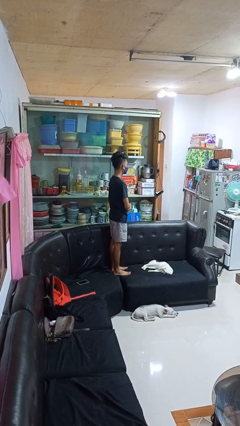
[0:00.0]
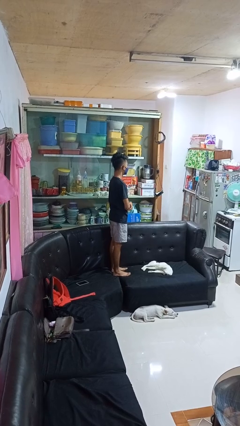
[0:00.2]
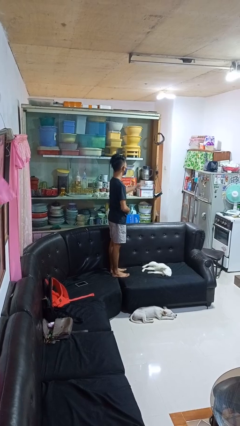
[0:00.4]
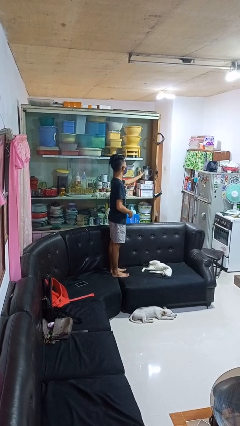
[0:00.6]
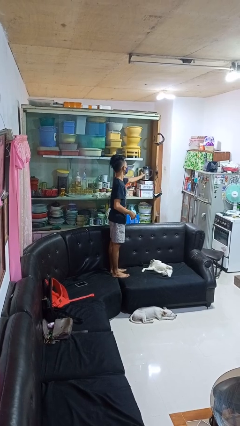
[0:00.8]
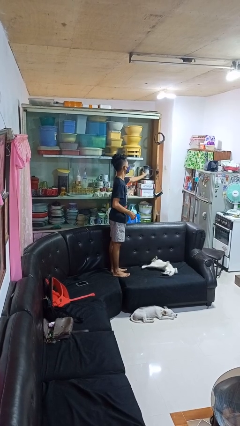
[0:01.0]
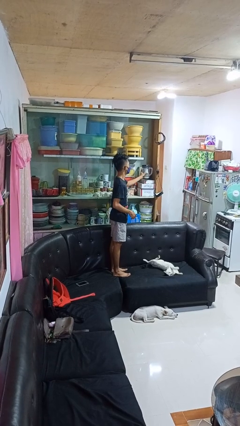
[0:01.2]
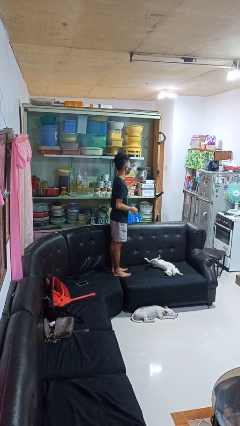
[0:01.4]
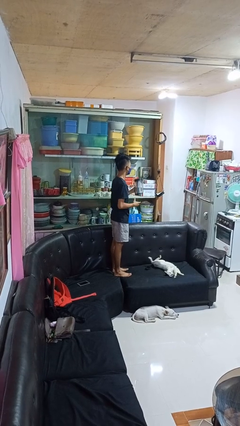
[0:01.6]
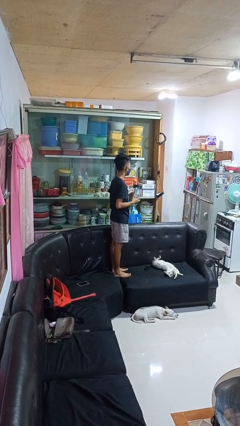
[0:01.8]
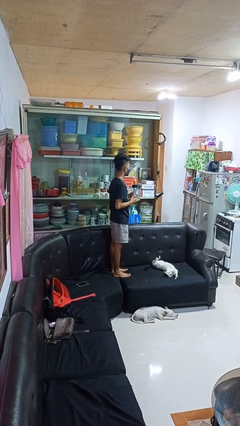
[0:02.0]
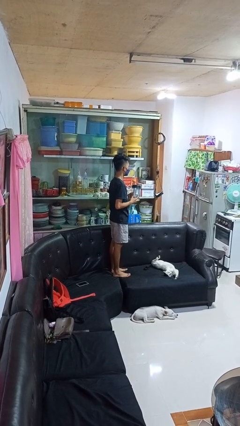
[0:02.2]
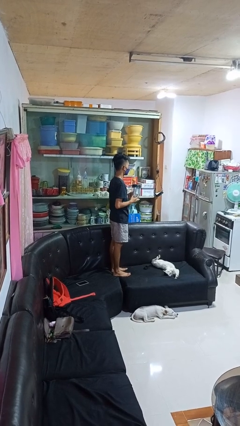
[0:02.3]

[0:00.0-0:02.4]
person picks up object from cabinet

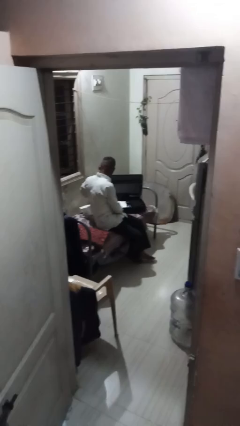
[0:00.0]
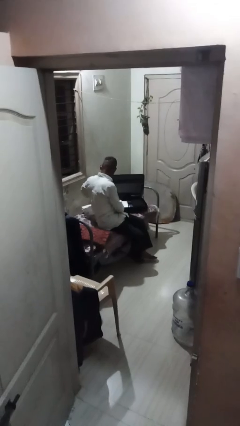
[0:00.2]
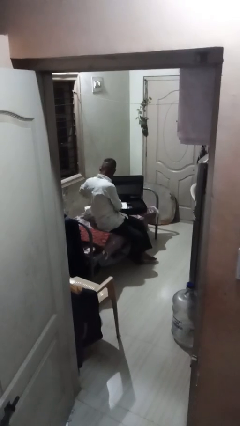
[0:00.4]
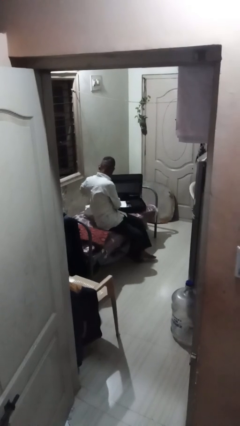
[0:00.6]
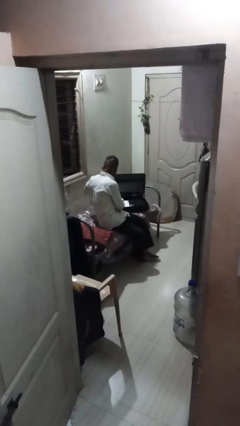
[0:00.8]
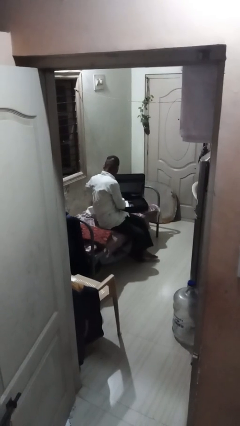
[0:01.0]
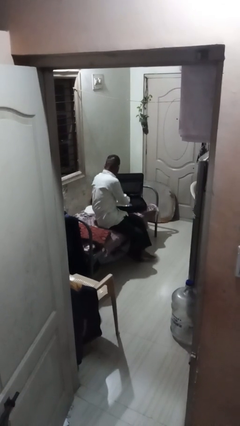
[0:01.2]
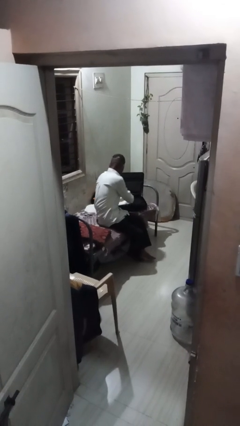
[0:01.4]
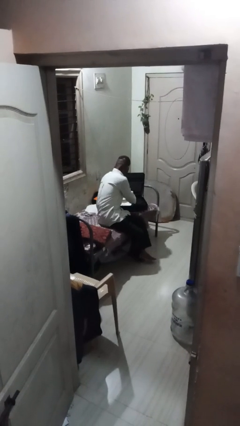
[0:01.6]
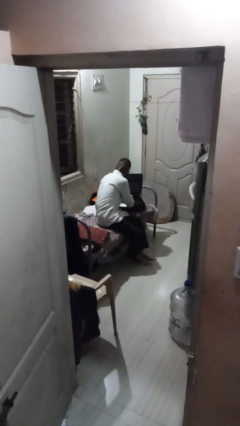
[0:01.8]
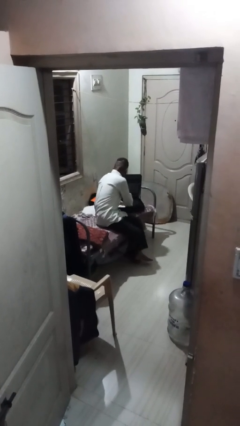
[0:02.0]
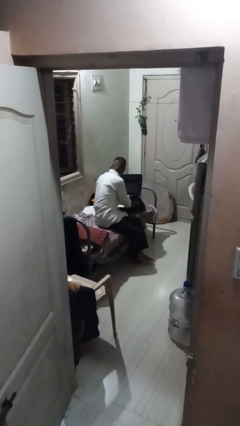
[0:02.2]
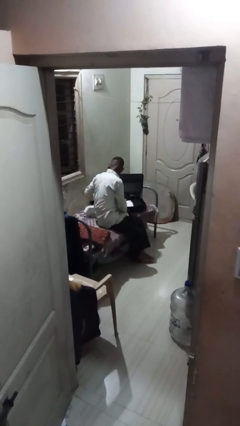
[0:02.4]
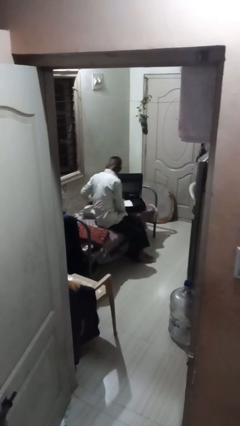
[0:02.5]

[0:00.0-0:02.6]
person loads clothes into suitcase

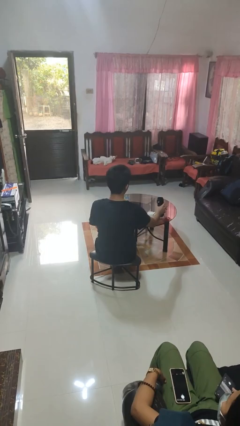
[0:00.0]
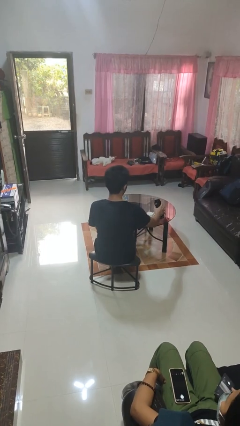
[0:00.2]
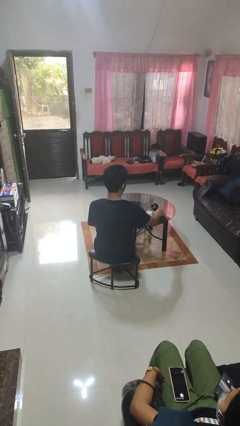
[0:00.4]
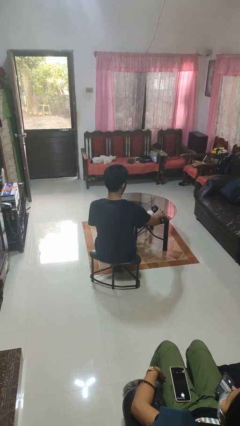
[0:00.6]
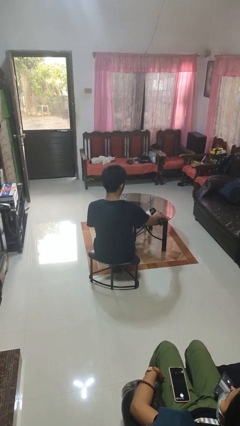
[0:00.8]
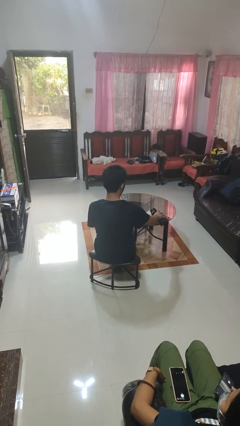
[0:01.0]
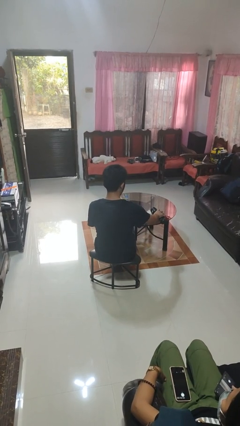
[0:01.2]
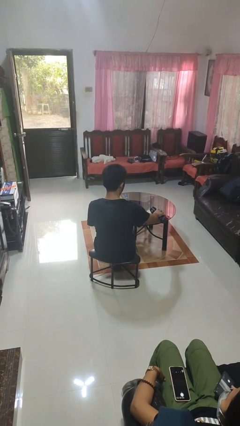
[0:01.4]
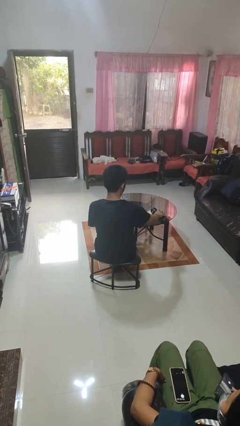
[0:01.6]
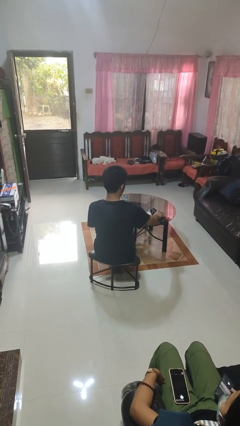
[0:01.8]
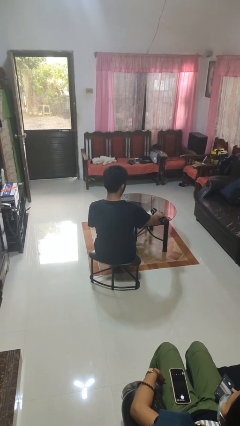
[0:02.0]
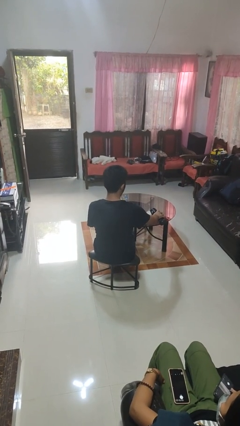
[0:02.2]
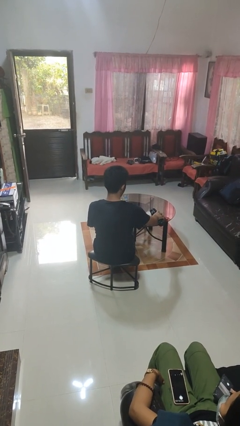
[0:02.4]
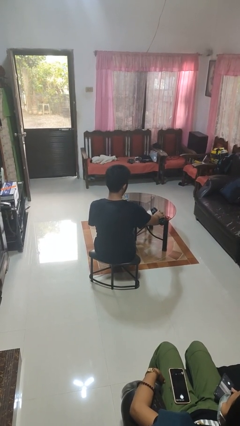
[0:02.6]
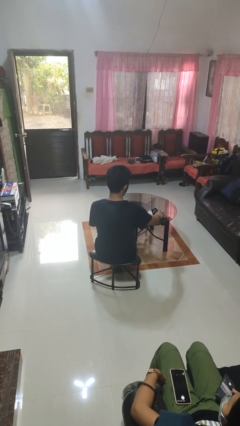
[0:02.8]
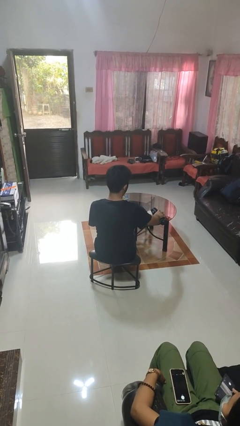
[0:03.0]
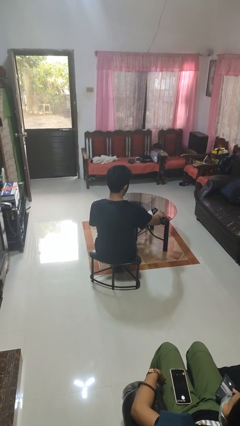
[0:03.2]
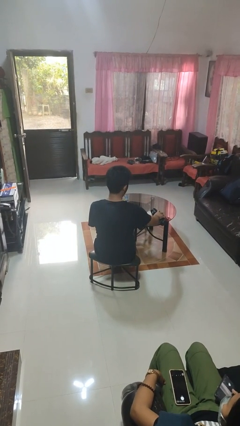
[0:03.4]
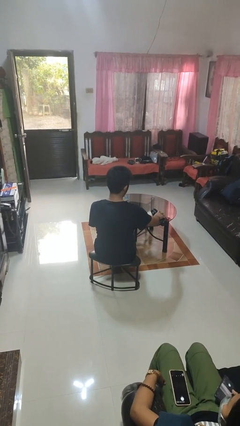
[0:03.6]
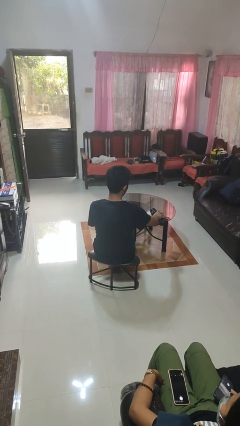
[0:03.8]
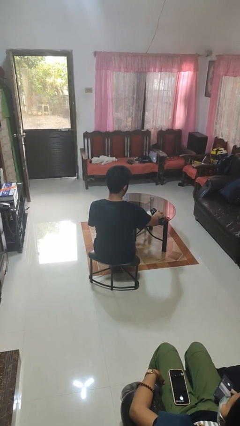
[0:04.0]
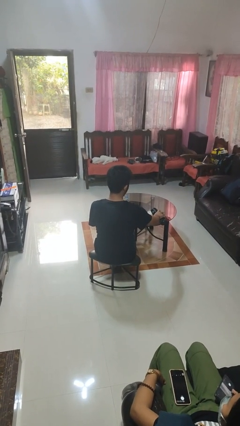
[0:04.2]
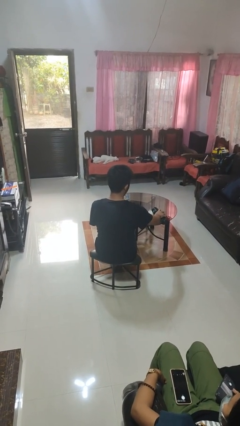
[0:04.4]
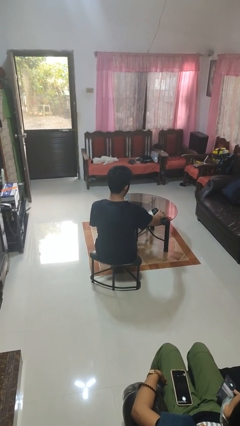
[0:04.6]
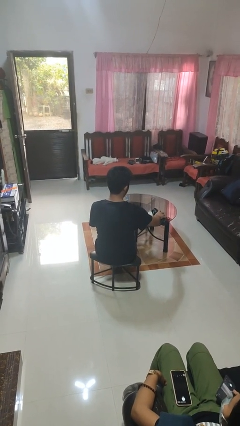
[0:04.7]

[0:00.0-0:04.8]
person pours liquid into cup

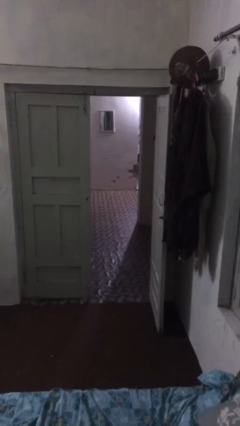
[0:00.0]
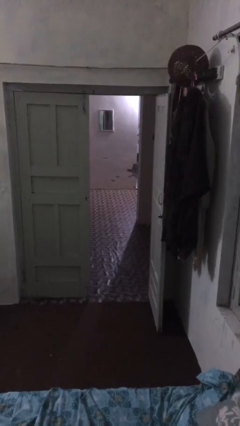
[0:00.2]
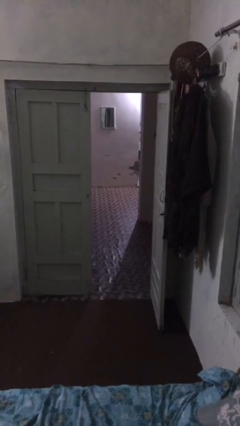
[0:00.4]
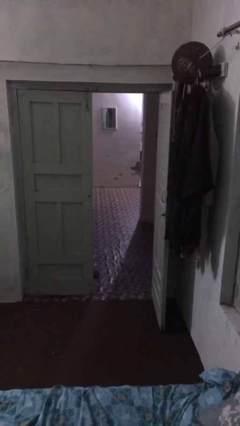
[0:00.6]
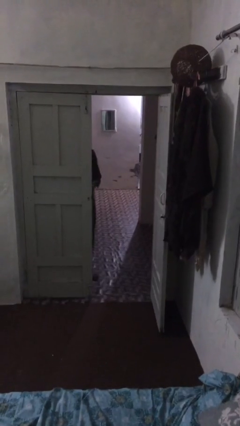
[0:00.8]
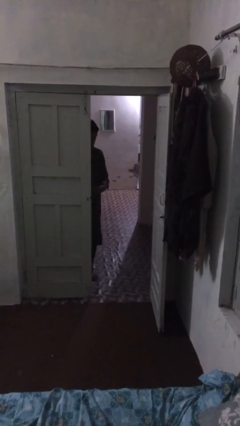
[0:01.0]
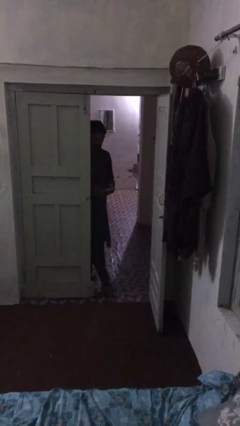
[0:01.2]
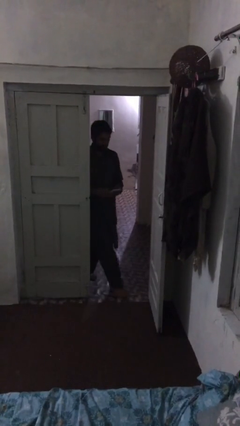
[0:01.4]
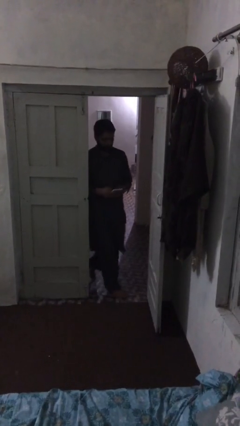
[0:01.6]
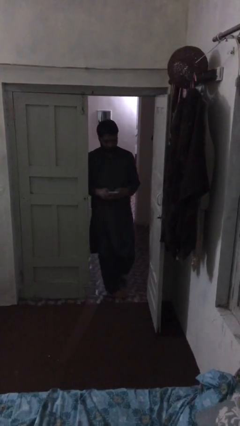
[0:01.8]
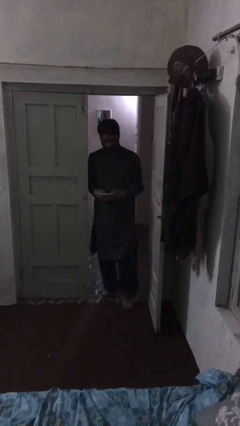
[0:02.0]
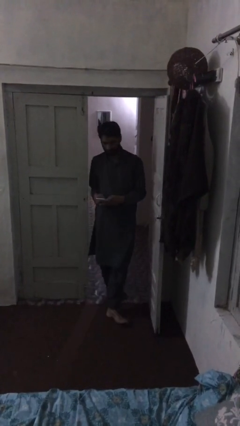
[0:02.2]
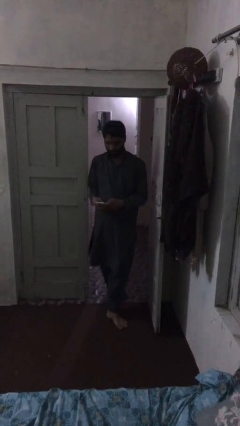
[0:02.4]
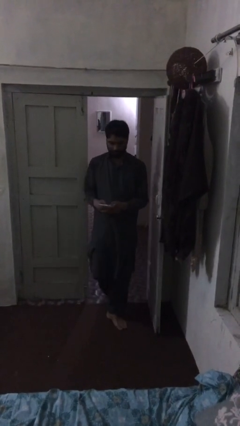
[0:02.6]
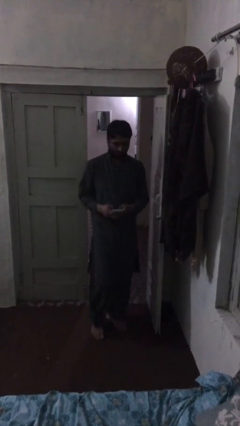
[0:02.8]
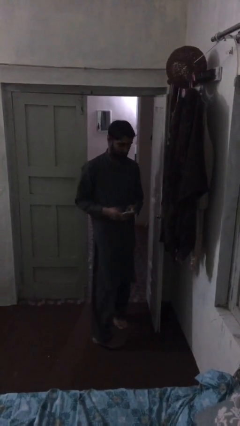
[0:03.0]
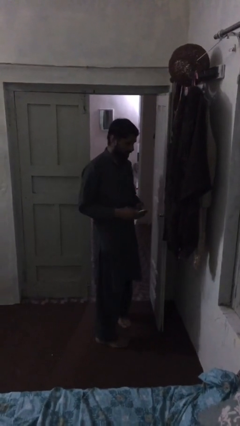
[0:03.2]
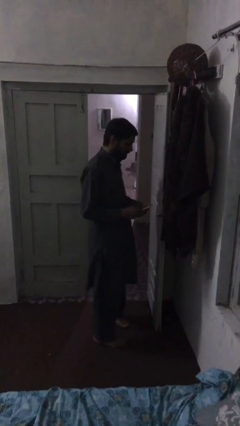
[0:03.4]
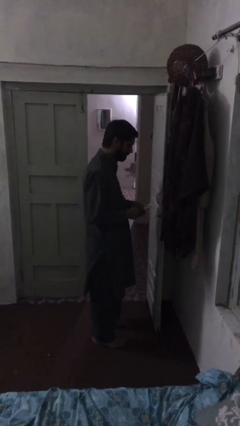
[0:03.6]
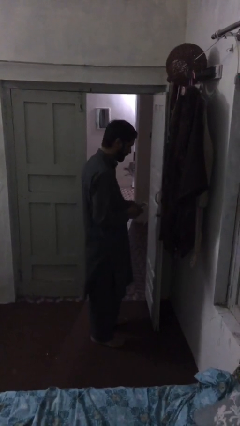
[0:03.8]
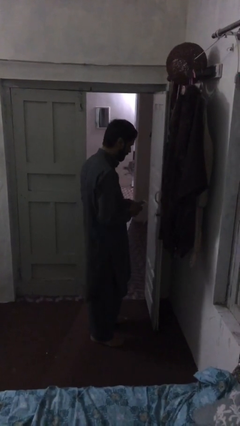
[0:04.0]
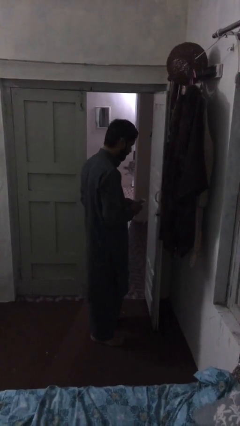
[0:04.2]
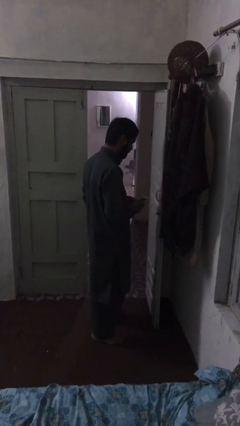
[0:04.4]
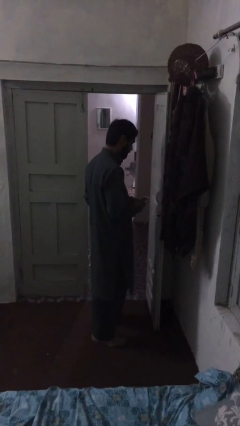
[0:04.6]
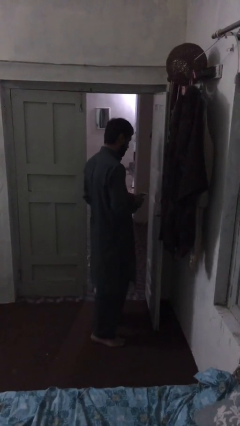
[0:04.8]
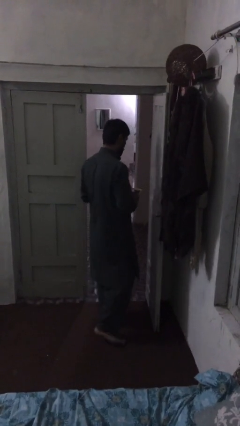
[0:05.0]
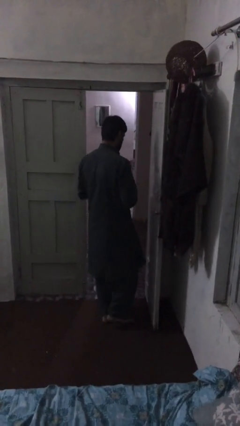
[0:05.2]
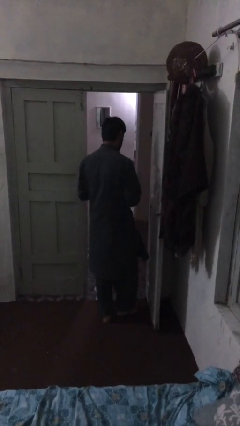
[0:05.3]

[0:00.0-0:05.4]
person enters scene through structure

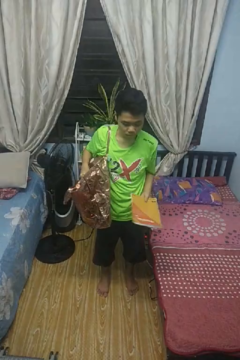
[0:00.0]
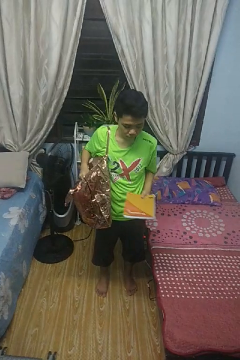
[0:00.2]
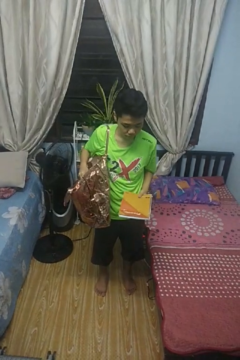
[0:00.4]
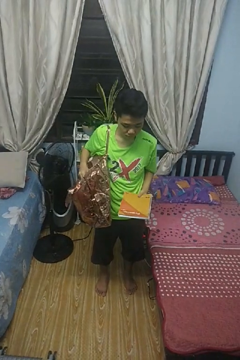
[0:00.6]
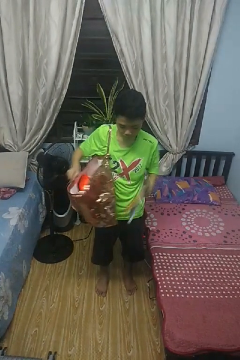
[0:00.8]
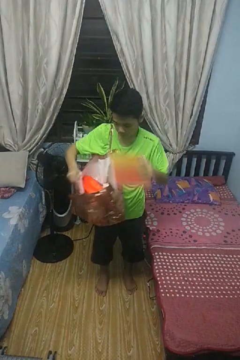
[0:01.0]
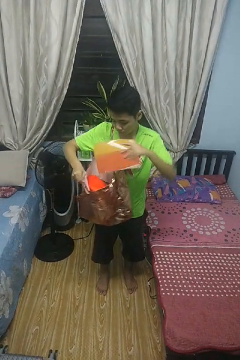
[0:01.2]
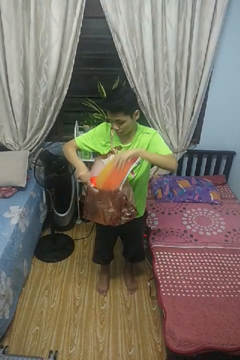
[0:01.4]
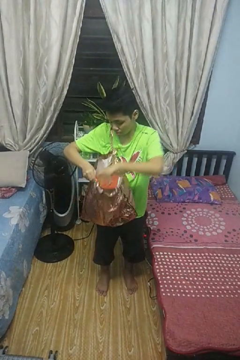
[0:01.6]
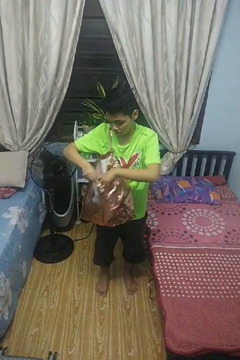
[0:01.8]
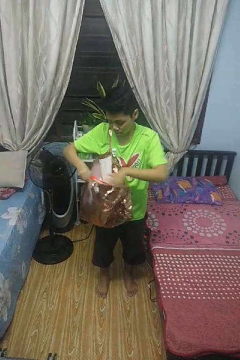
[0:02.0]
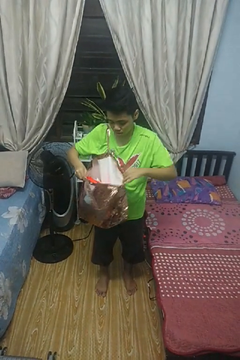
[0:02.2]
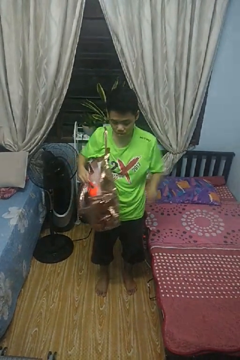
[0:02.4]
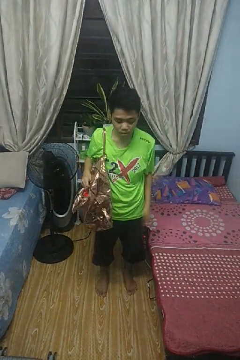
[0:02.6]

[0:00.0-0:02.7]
person puts object into bag
